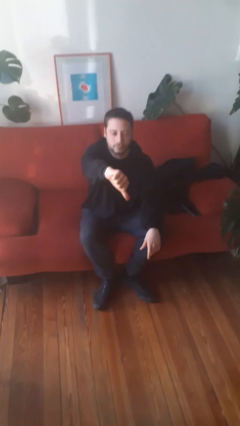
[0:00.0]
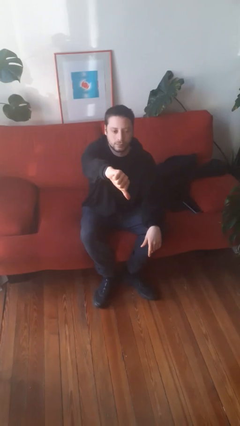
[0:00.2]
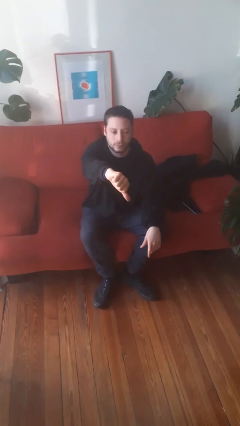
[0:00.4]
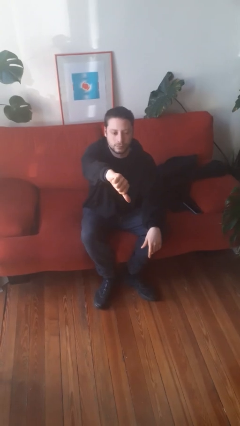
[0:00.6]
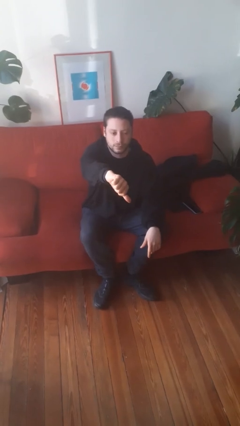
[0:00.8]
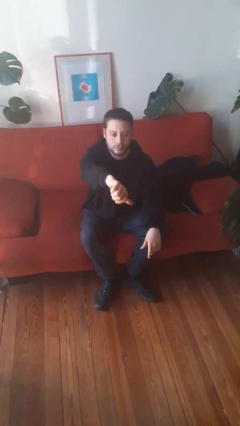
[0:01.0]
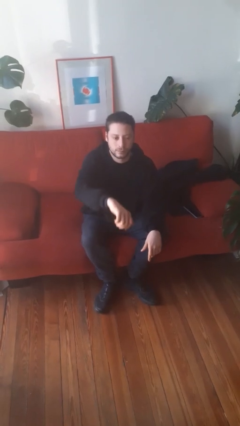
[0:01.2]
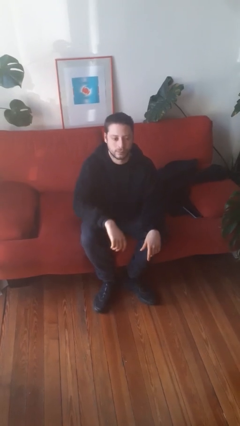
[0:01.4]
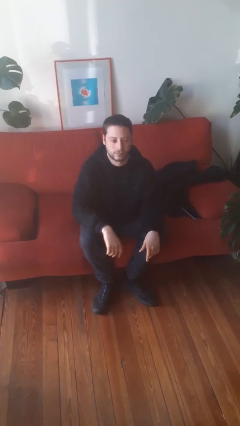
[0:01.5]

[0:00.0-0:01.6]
person gestures thumbs down

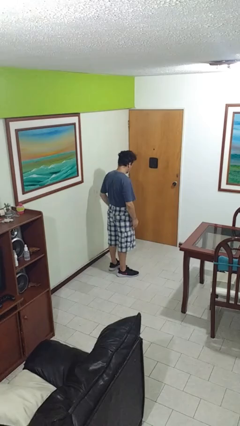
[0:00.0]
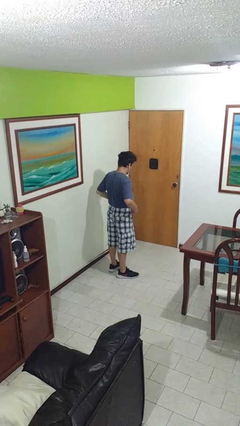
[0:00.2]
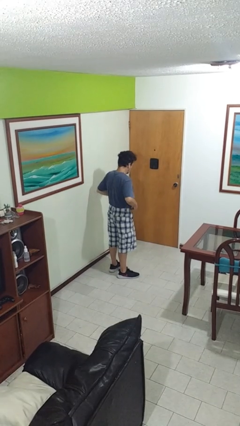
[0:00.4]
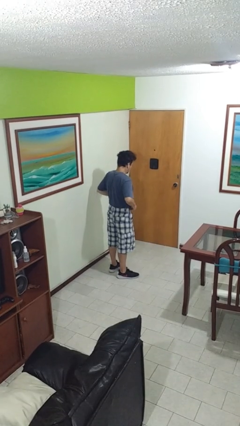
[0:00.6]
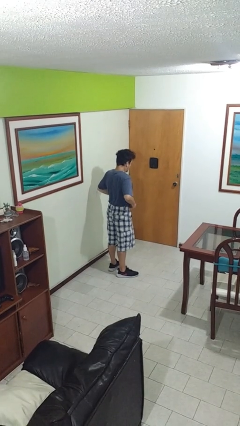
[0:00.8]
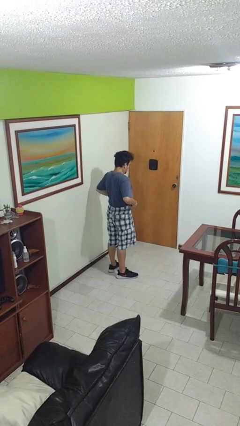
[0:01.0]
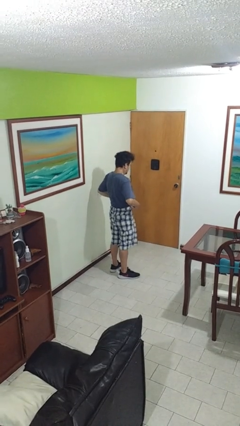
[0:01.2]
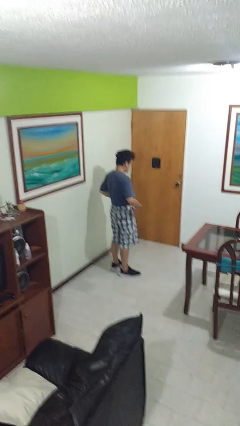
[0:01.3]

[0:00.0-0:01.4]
person hikes up pants

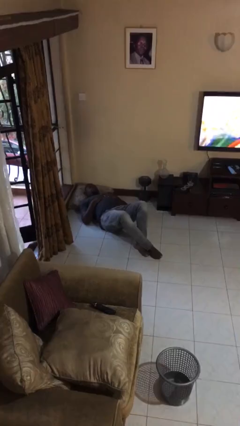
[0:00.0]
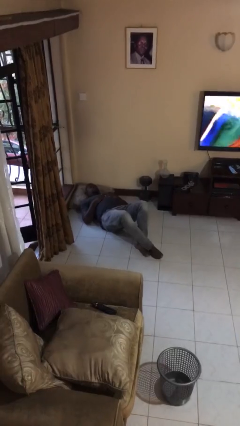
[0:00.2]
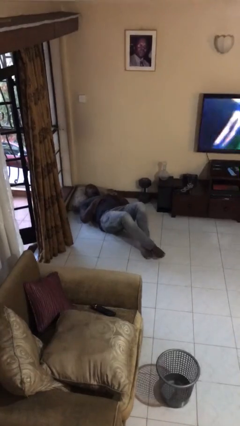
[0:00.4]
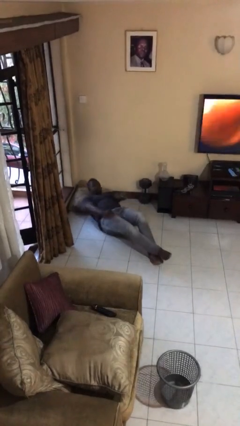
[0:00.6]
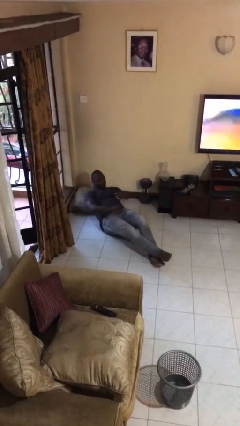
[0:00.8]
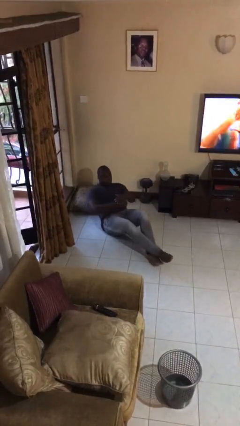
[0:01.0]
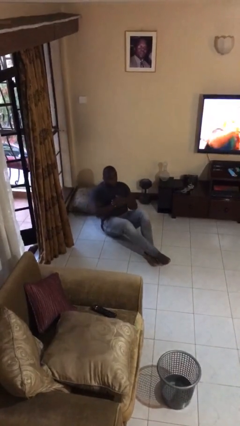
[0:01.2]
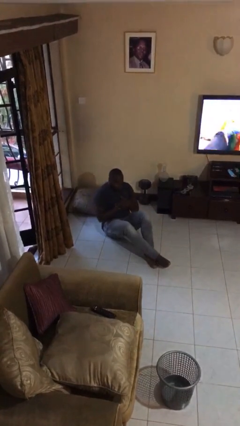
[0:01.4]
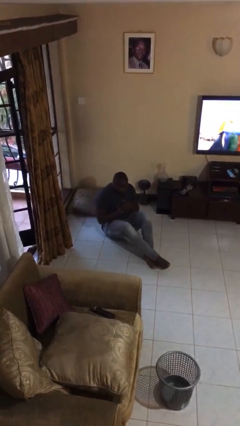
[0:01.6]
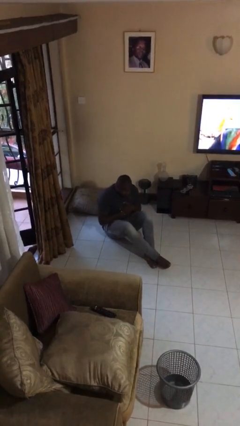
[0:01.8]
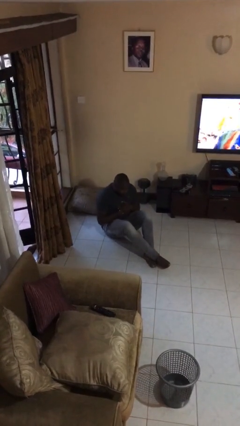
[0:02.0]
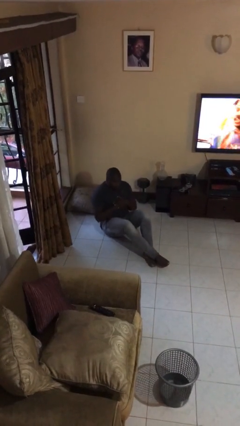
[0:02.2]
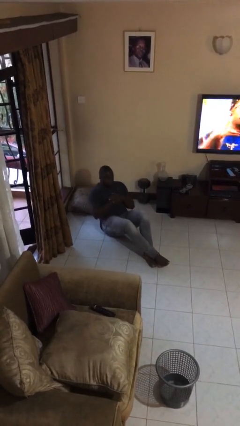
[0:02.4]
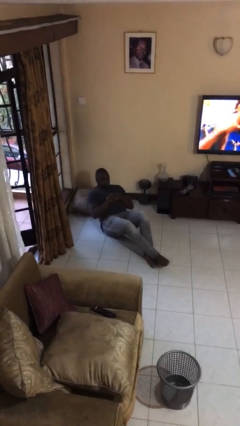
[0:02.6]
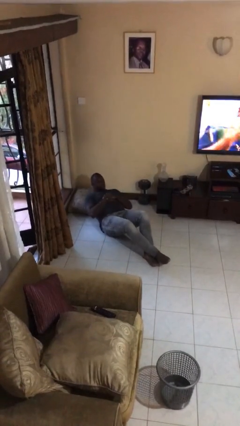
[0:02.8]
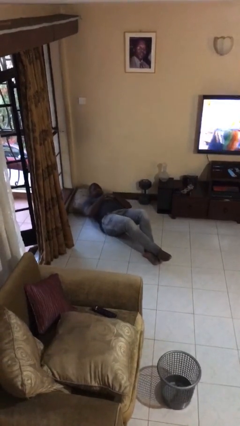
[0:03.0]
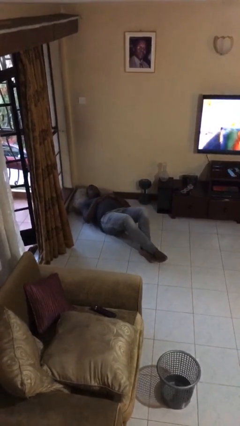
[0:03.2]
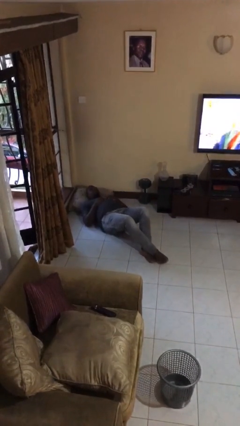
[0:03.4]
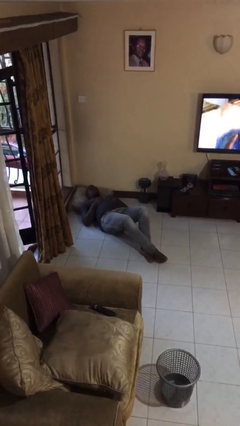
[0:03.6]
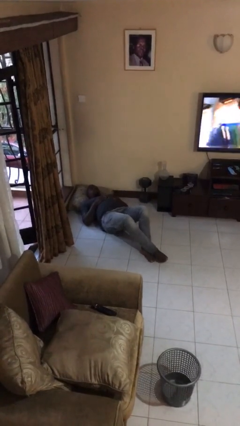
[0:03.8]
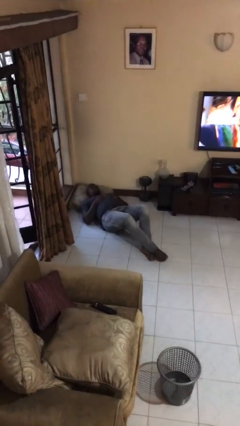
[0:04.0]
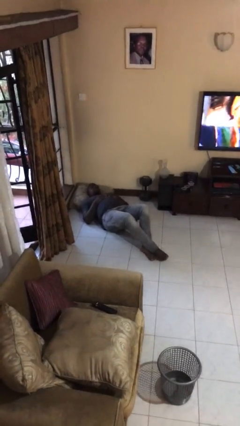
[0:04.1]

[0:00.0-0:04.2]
person exercises with situp

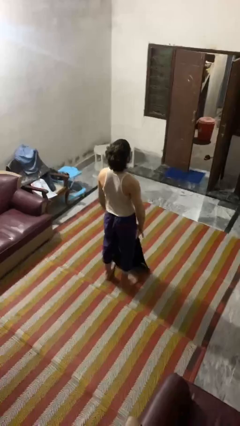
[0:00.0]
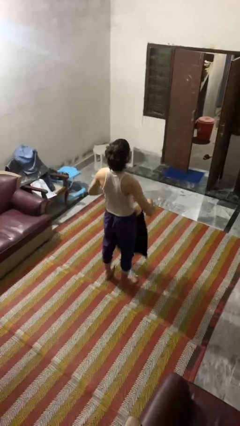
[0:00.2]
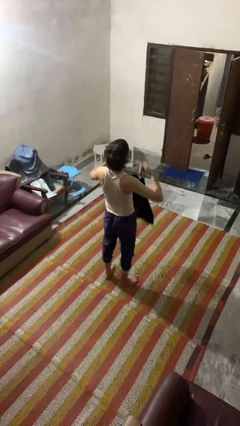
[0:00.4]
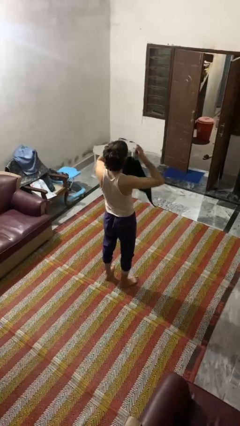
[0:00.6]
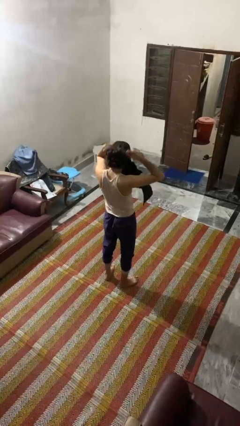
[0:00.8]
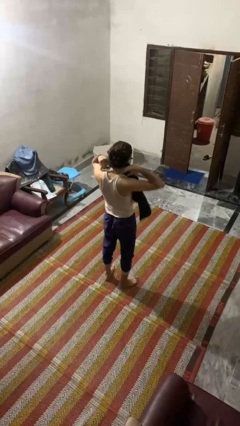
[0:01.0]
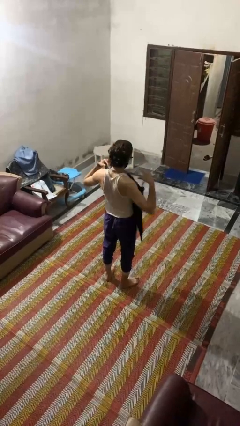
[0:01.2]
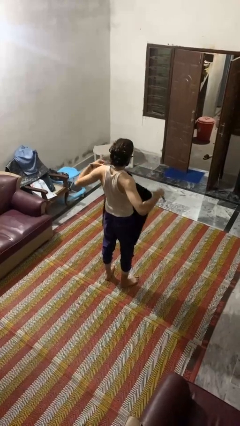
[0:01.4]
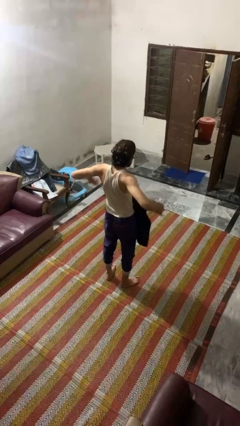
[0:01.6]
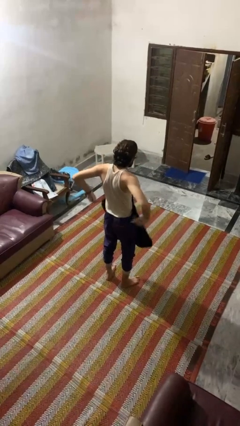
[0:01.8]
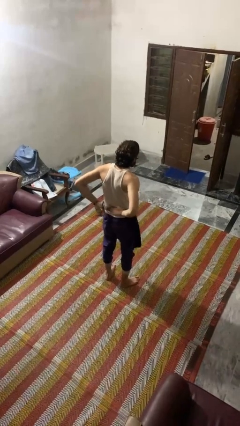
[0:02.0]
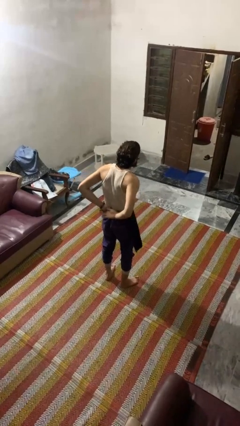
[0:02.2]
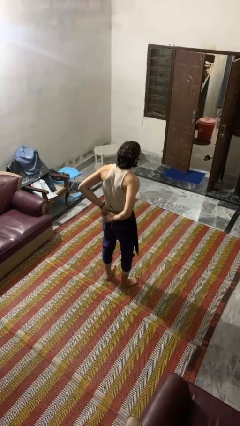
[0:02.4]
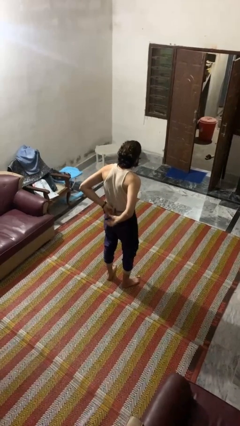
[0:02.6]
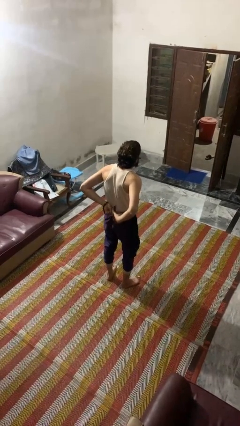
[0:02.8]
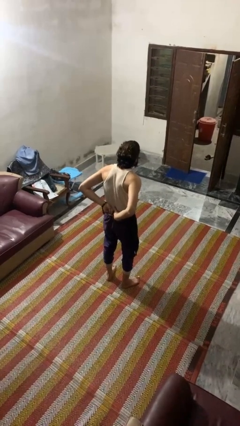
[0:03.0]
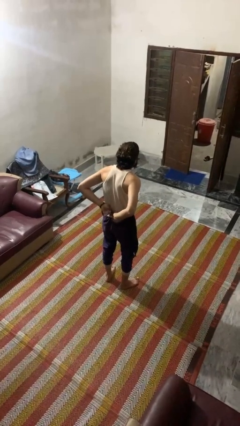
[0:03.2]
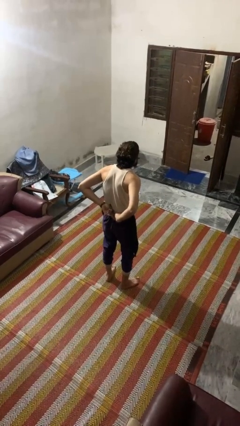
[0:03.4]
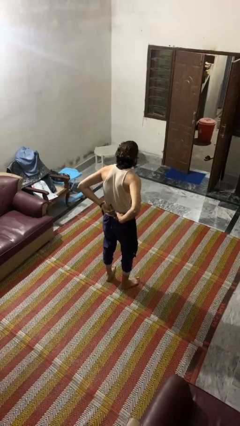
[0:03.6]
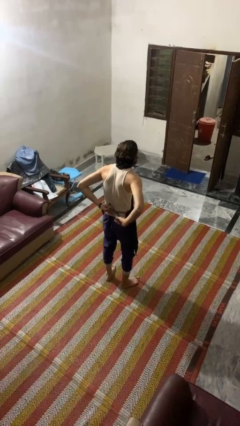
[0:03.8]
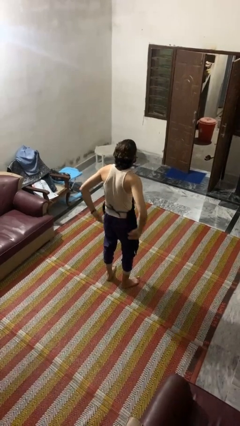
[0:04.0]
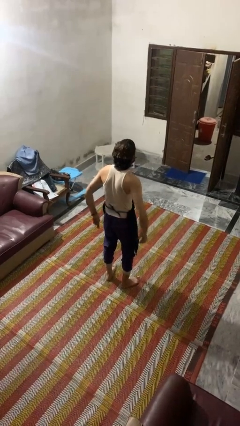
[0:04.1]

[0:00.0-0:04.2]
person puts on apron

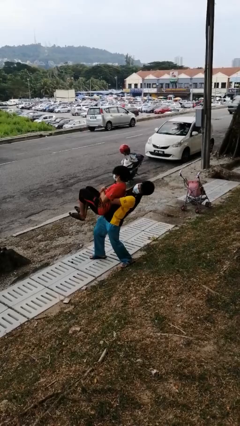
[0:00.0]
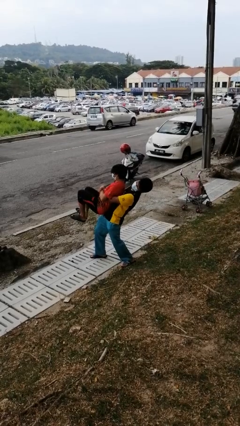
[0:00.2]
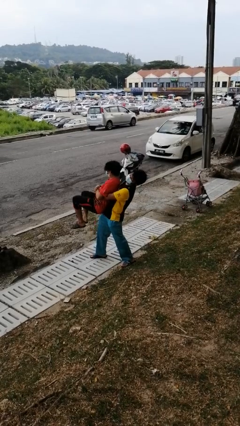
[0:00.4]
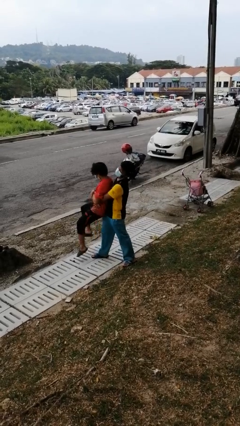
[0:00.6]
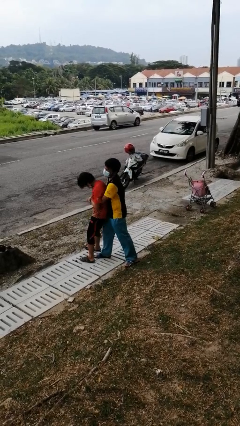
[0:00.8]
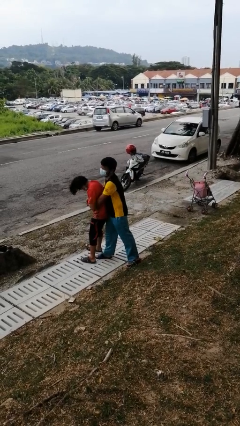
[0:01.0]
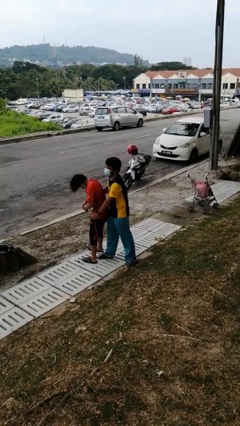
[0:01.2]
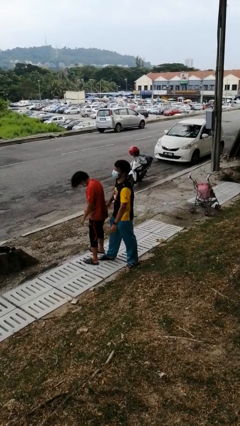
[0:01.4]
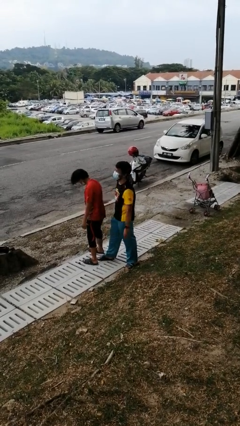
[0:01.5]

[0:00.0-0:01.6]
person puts down person

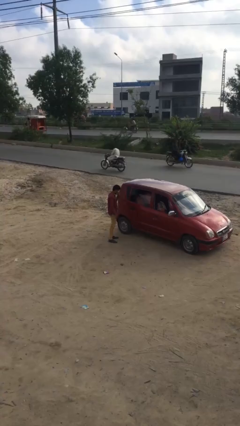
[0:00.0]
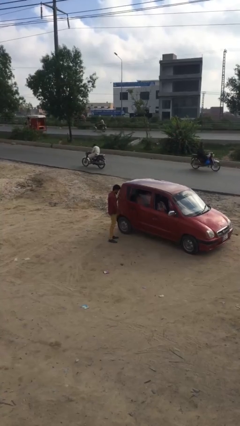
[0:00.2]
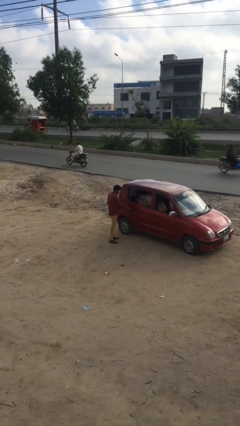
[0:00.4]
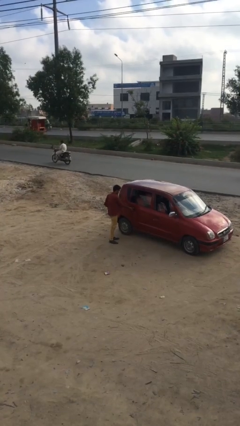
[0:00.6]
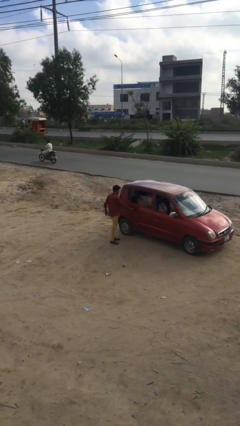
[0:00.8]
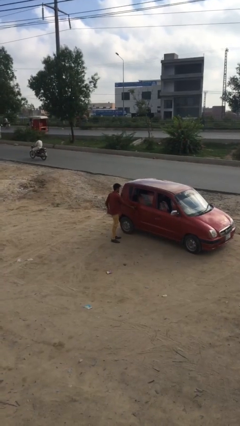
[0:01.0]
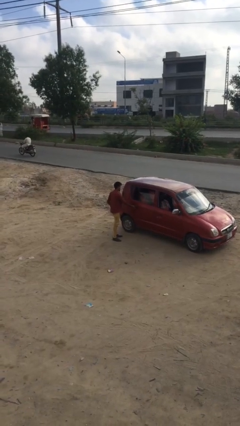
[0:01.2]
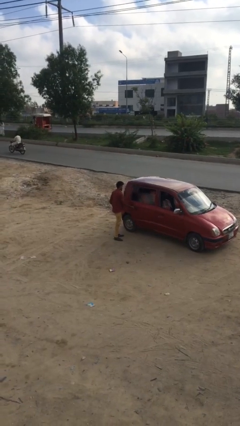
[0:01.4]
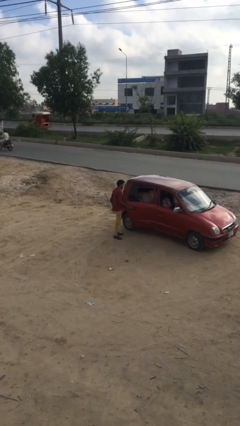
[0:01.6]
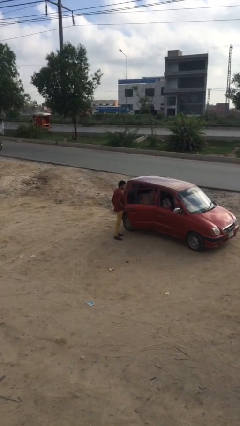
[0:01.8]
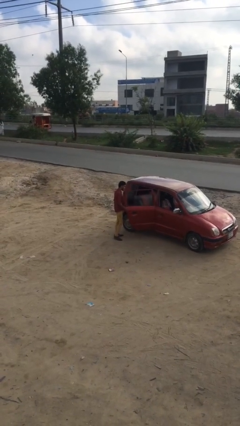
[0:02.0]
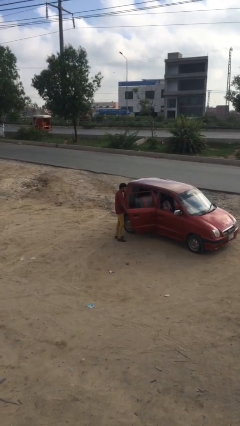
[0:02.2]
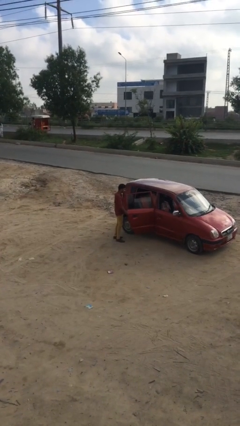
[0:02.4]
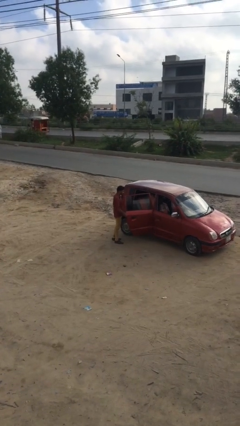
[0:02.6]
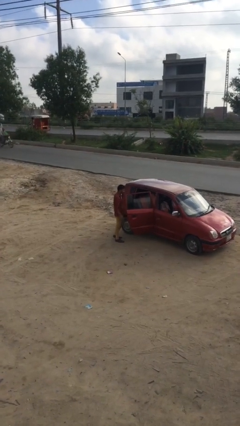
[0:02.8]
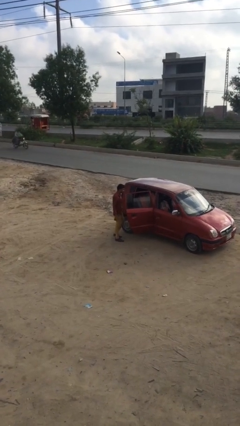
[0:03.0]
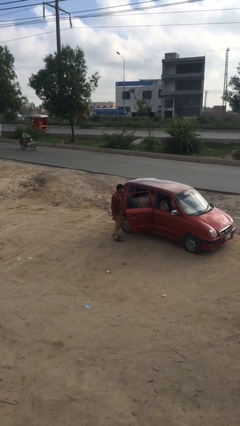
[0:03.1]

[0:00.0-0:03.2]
person opens car door

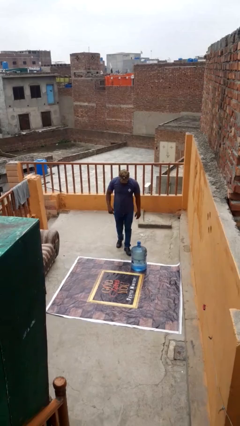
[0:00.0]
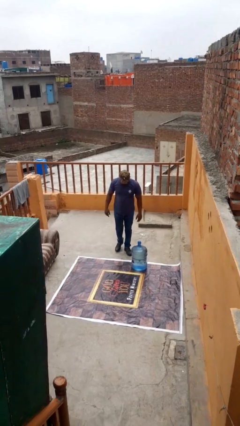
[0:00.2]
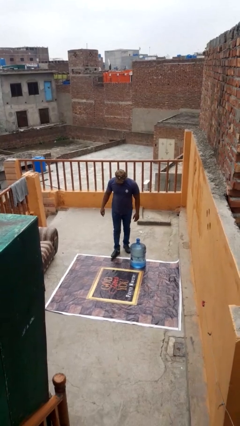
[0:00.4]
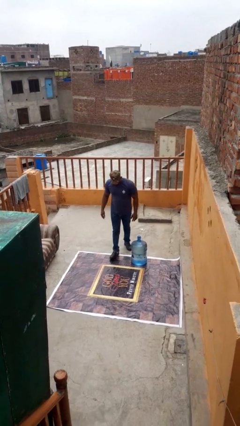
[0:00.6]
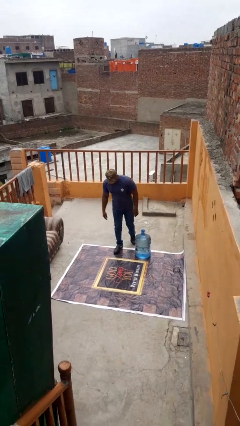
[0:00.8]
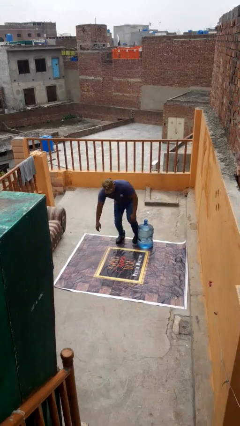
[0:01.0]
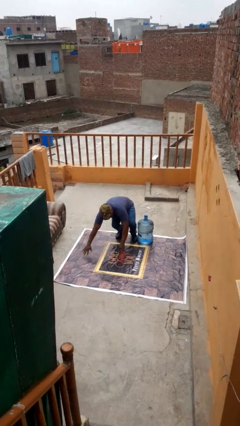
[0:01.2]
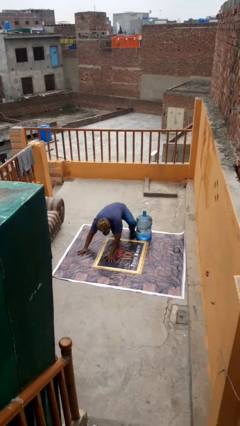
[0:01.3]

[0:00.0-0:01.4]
person trips on object on floor
